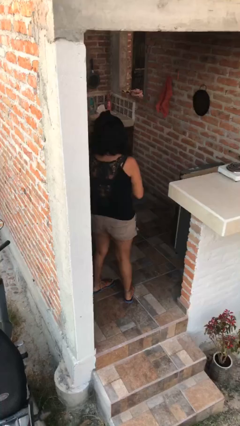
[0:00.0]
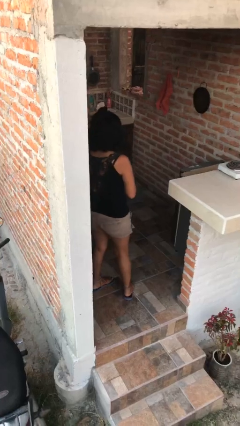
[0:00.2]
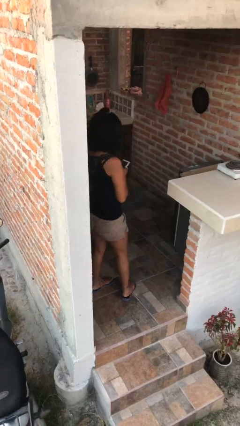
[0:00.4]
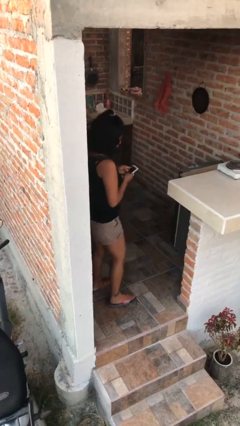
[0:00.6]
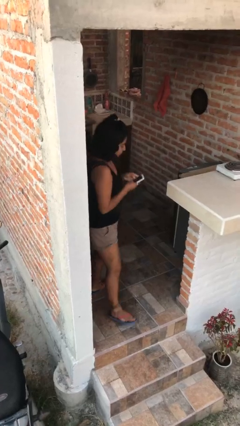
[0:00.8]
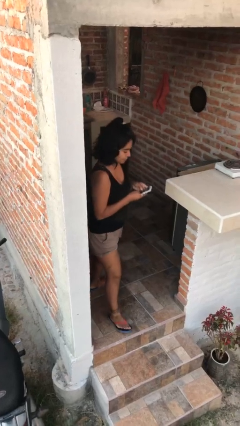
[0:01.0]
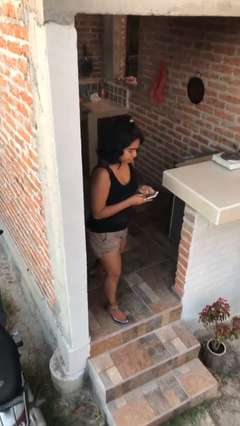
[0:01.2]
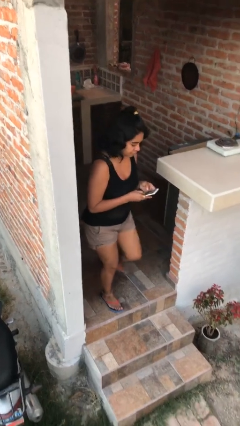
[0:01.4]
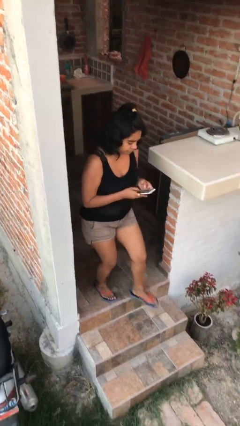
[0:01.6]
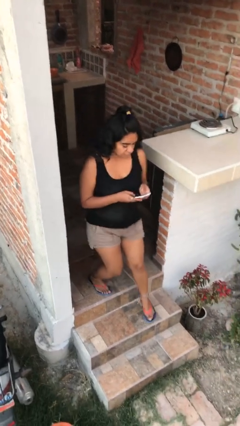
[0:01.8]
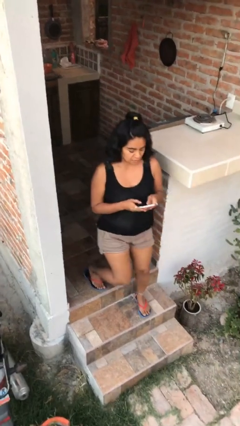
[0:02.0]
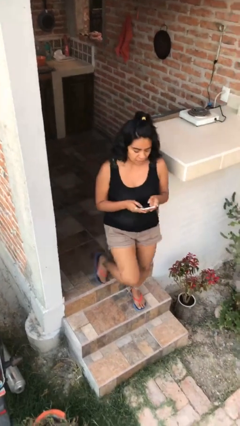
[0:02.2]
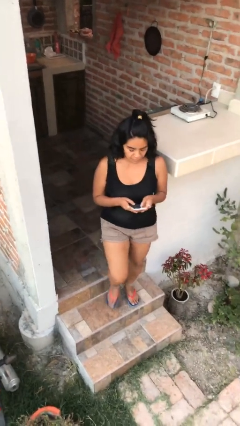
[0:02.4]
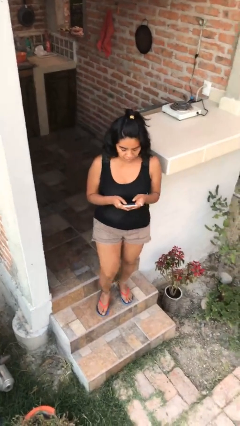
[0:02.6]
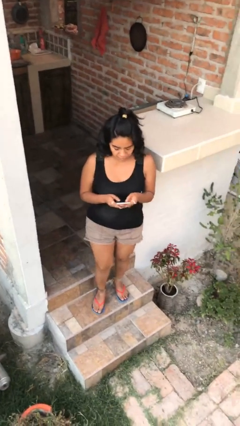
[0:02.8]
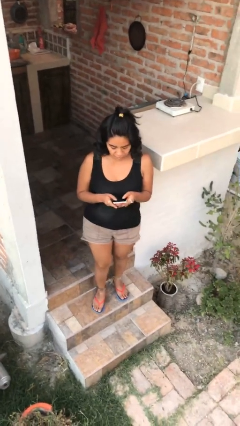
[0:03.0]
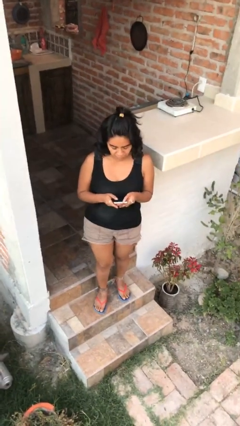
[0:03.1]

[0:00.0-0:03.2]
person enters scene through structure

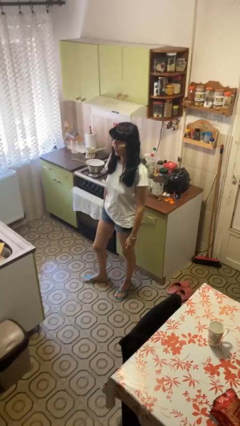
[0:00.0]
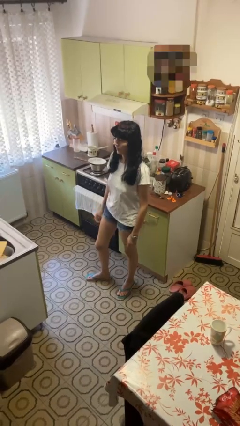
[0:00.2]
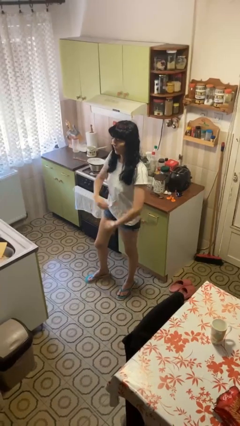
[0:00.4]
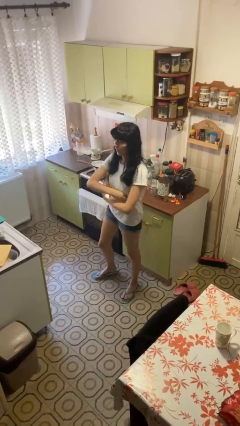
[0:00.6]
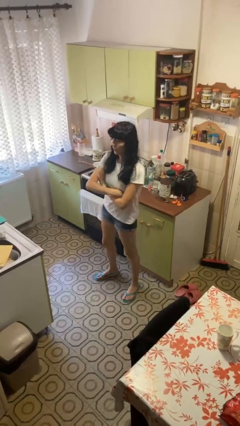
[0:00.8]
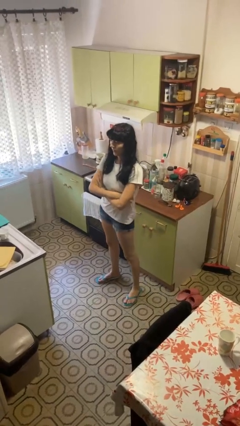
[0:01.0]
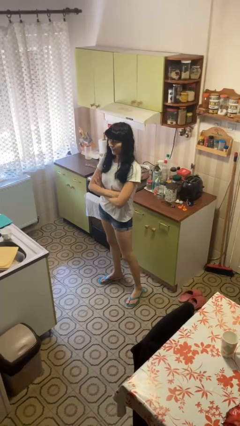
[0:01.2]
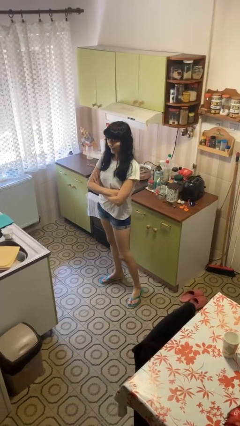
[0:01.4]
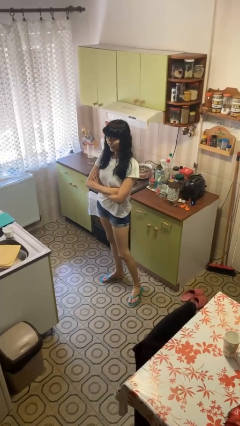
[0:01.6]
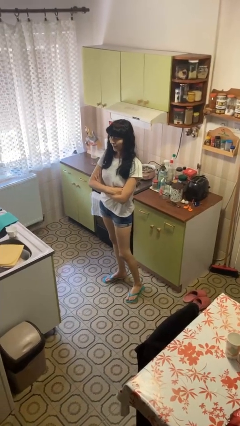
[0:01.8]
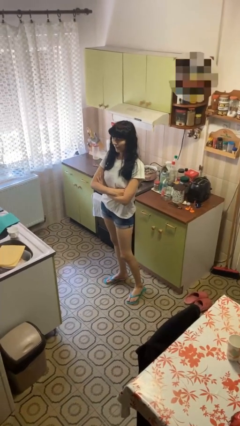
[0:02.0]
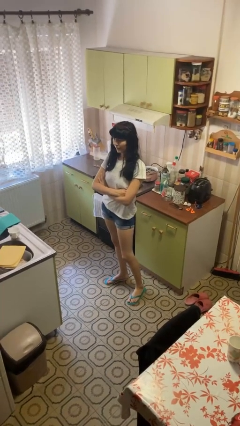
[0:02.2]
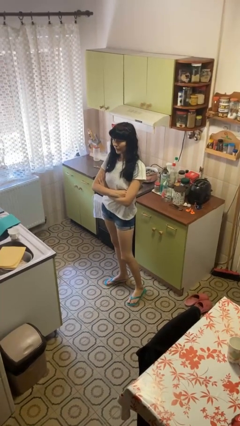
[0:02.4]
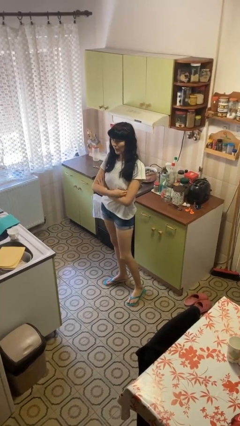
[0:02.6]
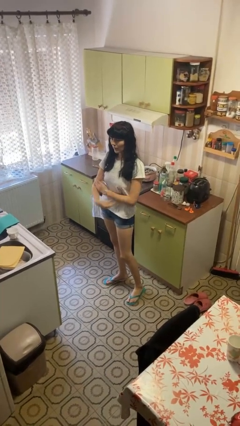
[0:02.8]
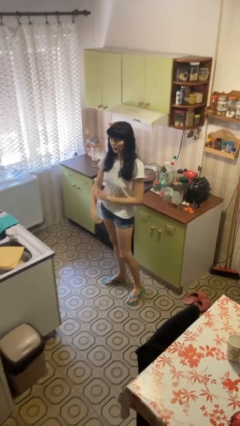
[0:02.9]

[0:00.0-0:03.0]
person crosses arms

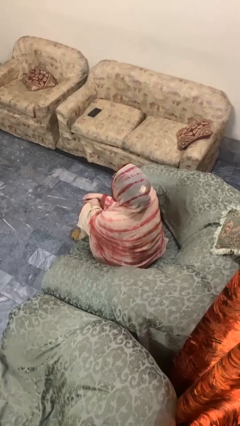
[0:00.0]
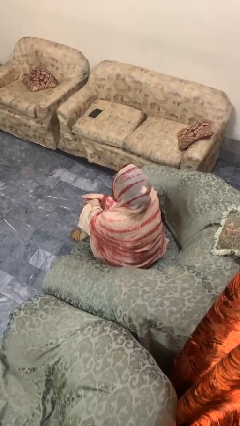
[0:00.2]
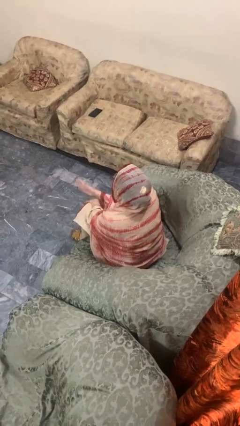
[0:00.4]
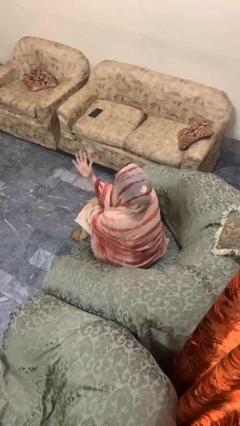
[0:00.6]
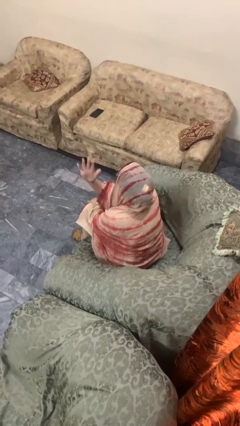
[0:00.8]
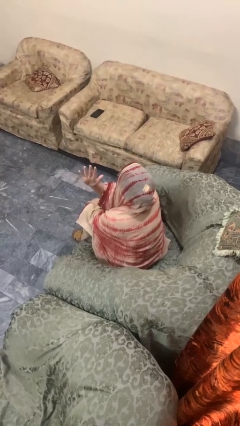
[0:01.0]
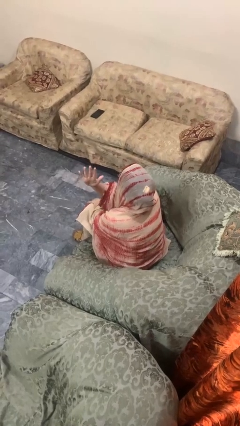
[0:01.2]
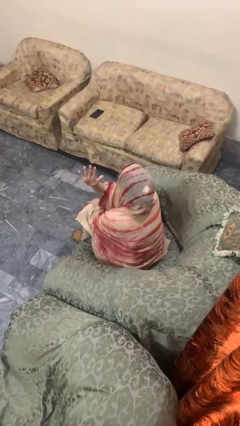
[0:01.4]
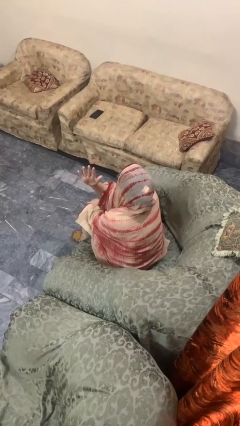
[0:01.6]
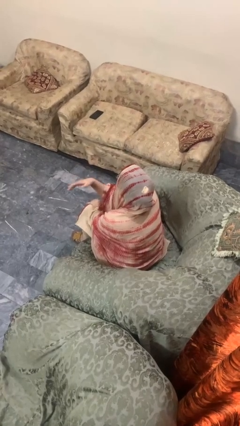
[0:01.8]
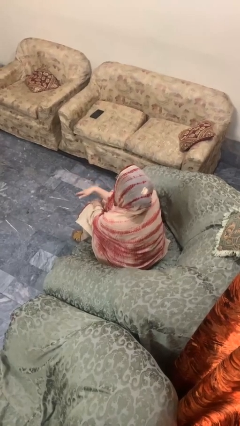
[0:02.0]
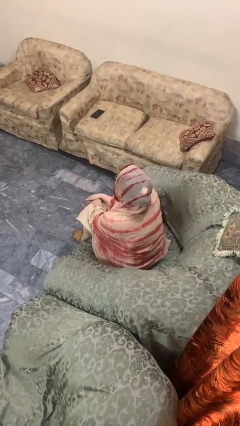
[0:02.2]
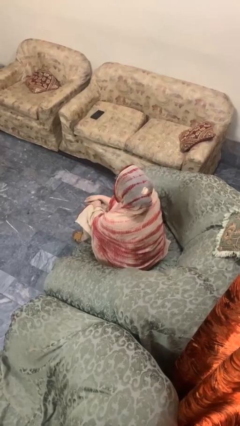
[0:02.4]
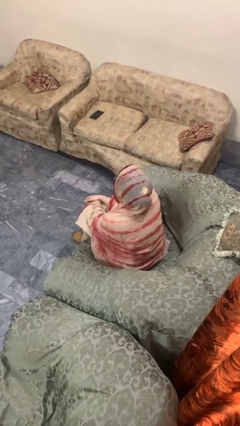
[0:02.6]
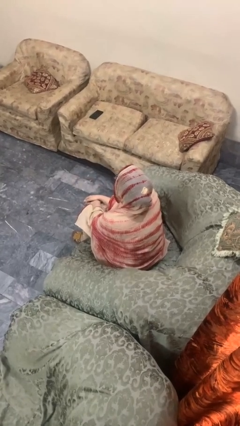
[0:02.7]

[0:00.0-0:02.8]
person gestures number five

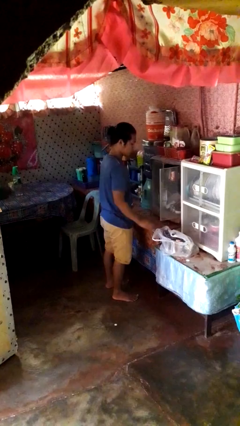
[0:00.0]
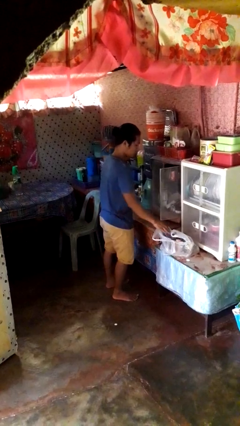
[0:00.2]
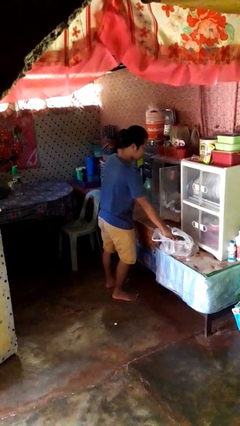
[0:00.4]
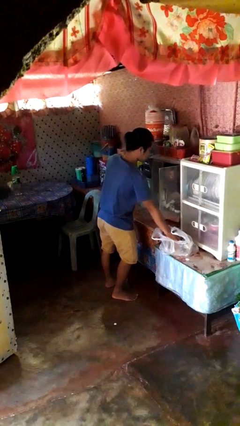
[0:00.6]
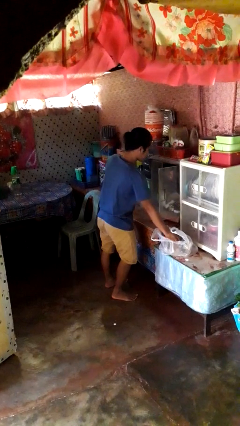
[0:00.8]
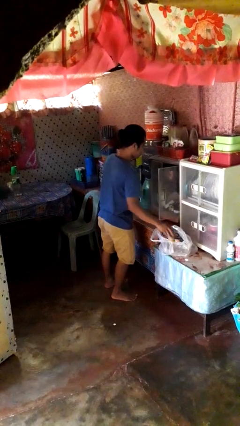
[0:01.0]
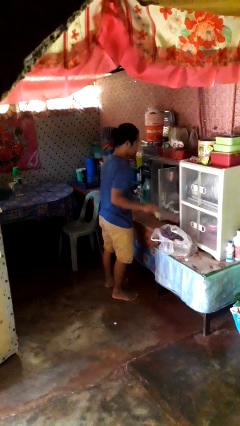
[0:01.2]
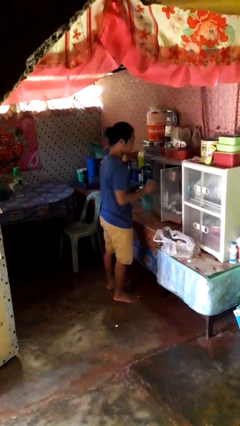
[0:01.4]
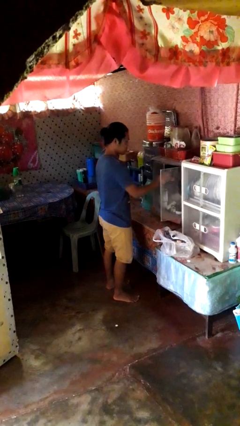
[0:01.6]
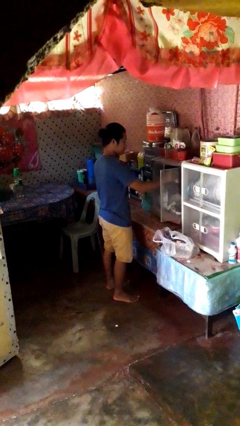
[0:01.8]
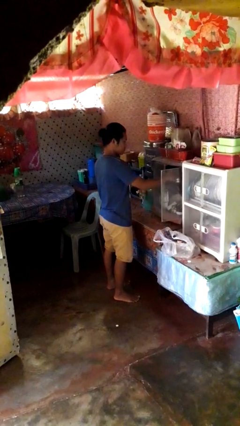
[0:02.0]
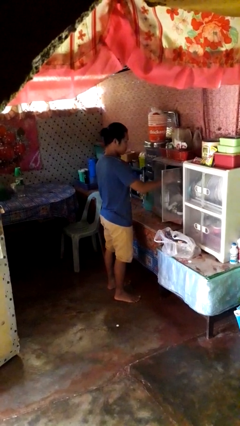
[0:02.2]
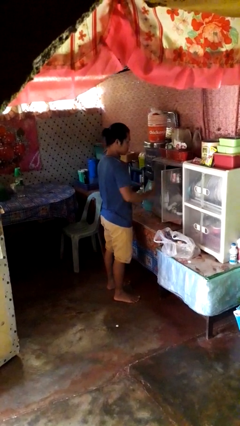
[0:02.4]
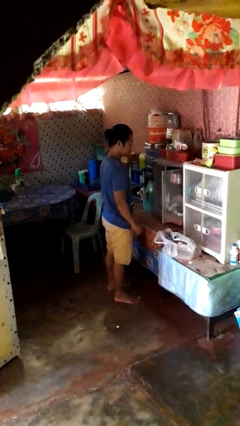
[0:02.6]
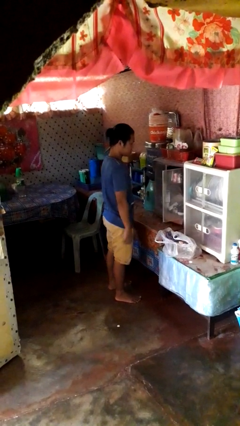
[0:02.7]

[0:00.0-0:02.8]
person loads groceries into cabinet

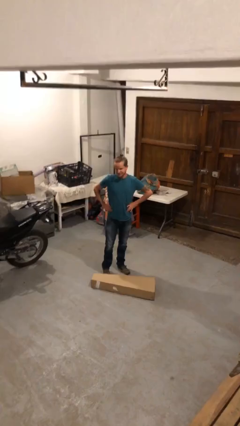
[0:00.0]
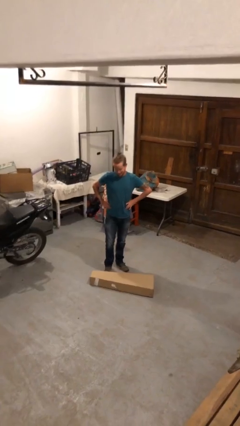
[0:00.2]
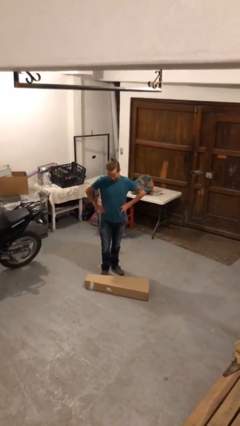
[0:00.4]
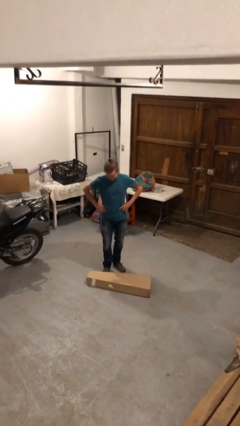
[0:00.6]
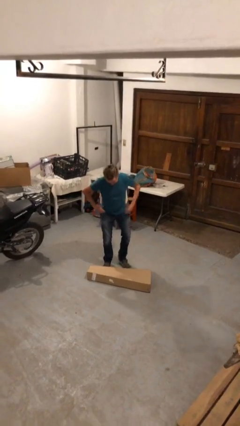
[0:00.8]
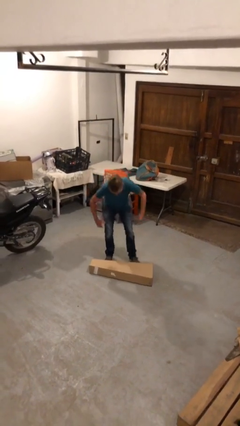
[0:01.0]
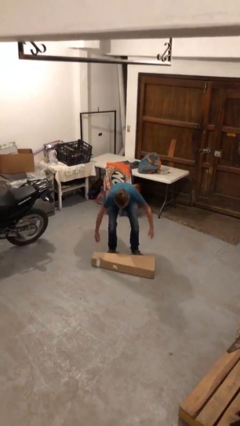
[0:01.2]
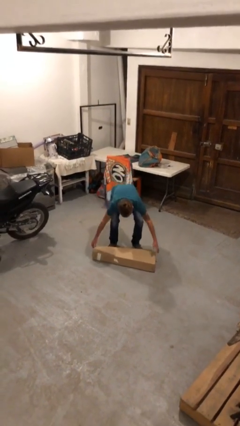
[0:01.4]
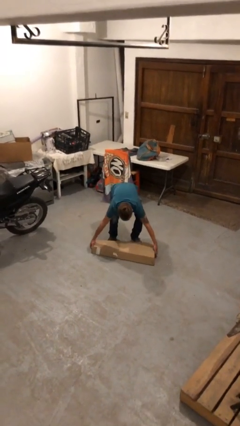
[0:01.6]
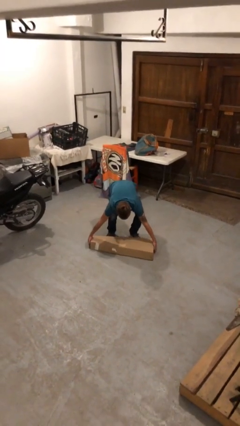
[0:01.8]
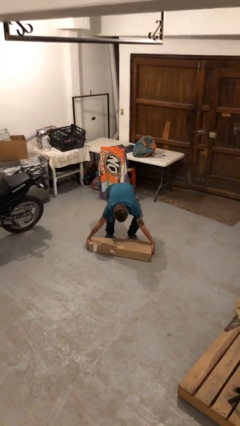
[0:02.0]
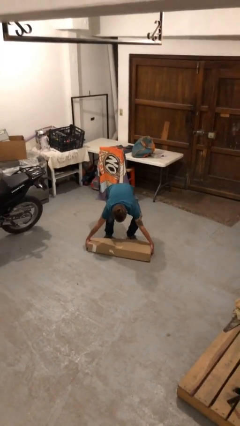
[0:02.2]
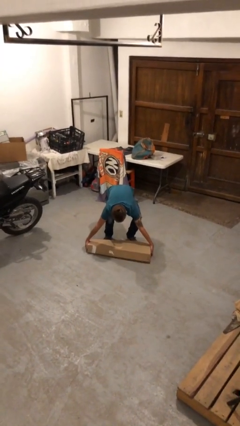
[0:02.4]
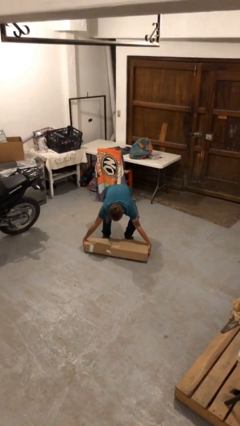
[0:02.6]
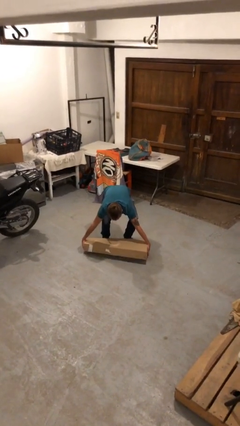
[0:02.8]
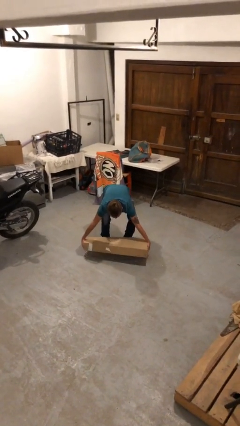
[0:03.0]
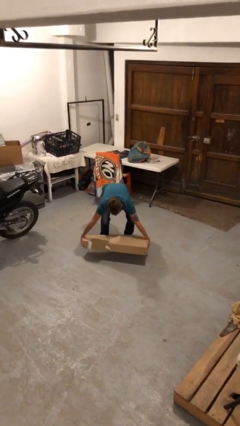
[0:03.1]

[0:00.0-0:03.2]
person picks up object from floor

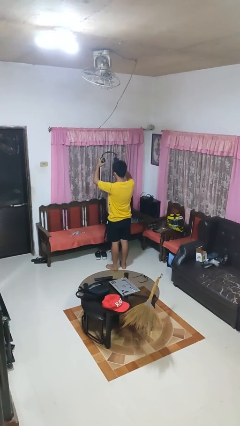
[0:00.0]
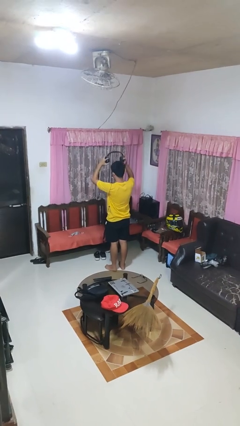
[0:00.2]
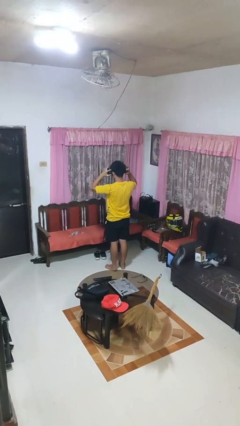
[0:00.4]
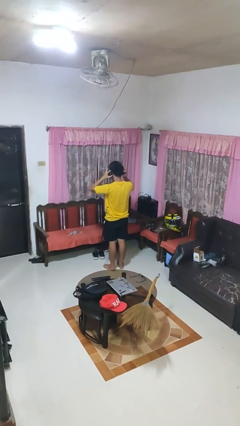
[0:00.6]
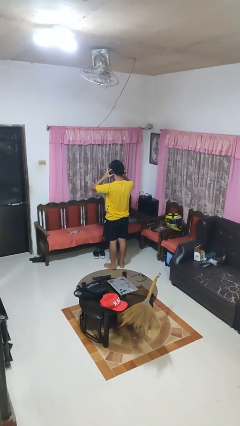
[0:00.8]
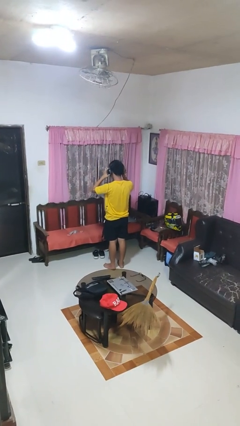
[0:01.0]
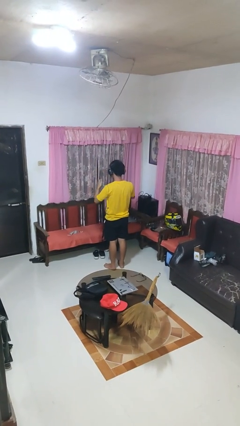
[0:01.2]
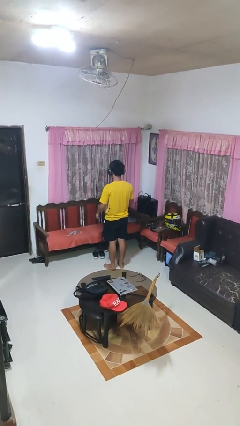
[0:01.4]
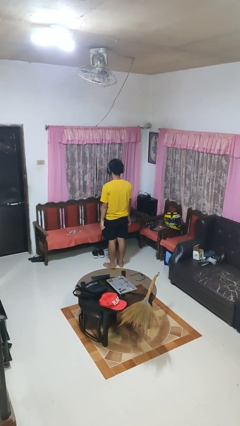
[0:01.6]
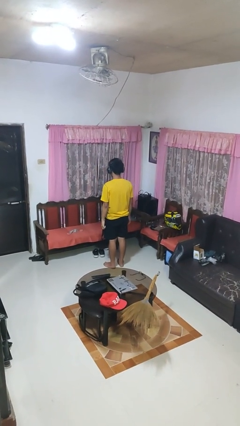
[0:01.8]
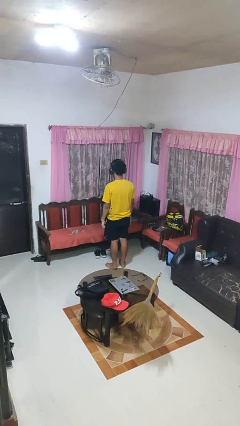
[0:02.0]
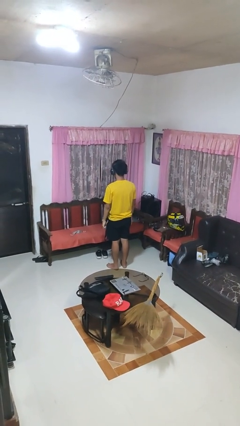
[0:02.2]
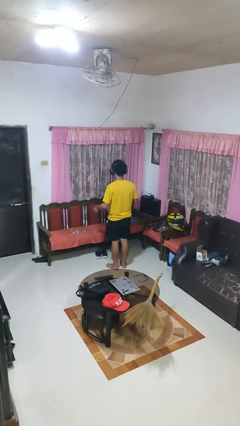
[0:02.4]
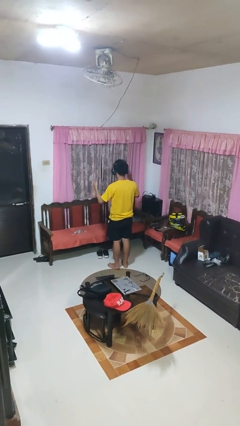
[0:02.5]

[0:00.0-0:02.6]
person puts on headphones
